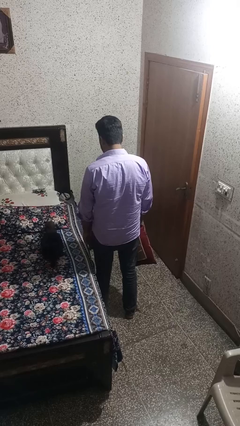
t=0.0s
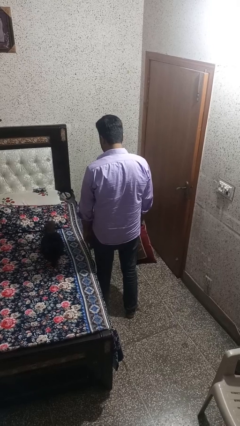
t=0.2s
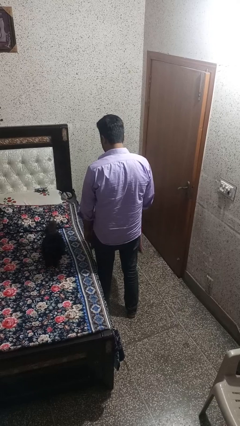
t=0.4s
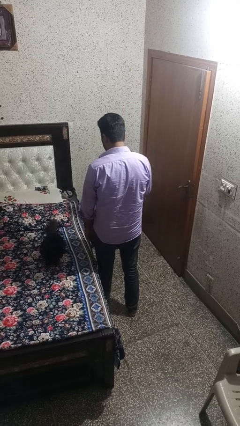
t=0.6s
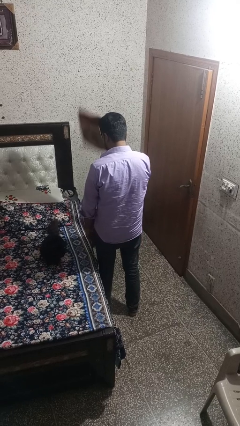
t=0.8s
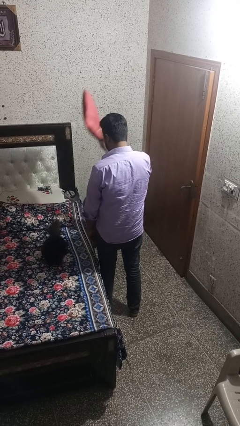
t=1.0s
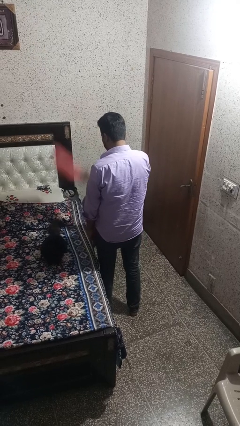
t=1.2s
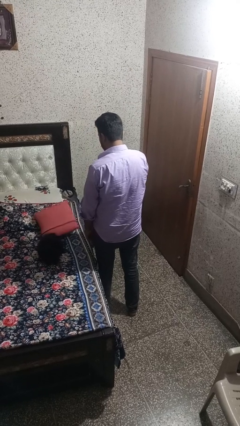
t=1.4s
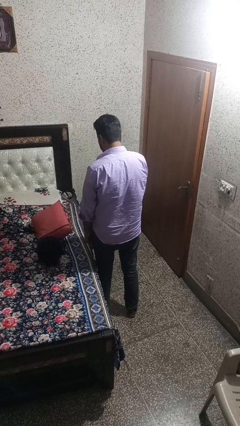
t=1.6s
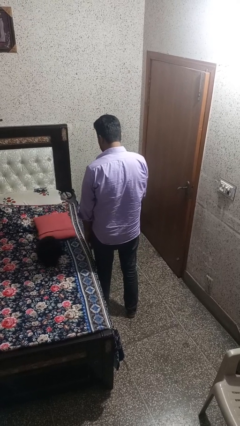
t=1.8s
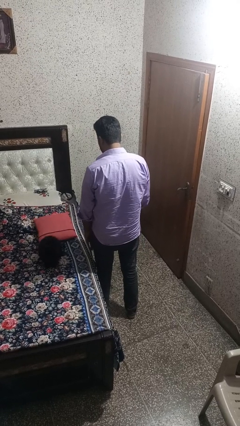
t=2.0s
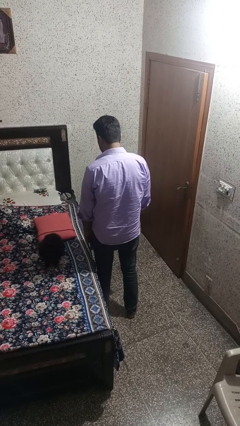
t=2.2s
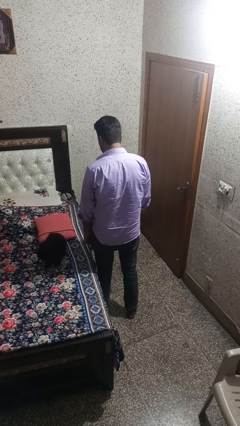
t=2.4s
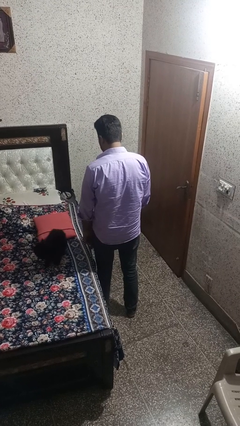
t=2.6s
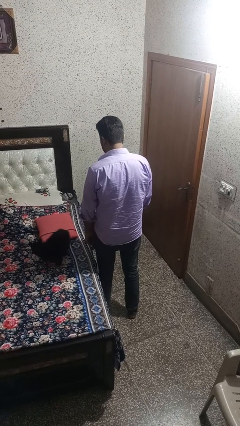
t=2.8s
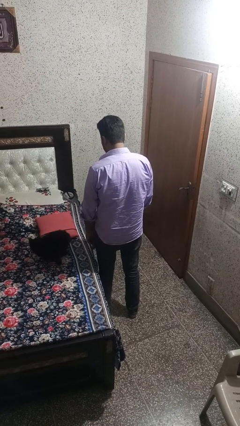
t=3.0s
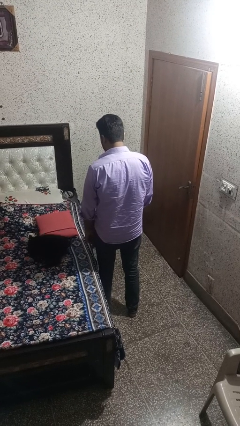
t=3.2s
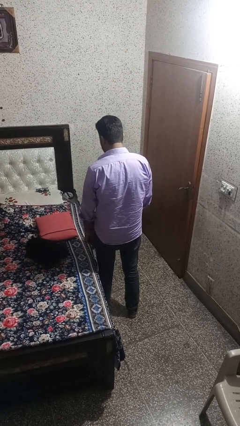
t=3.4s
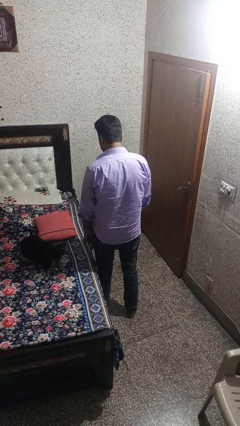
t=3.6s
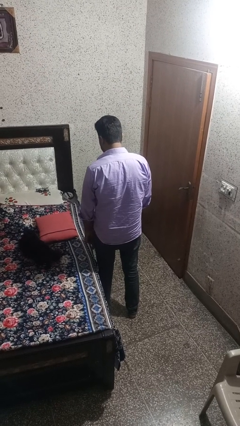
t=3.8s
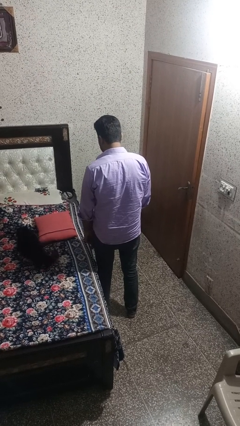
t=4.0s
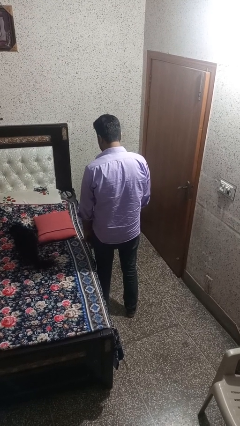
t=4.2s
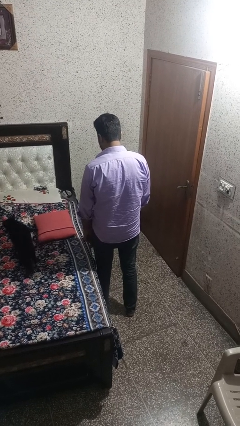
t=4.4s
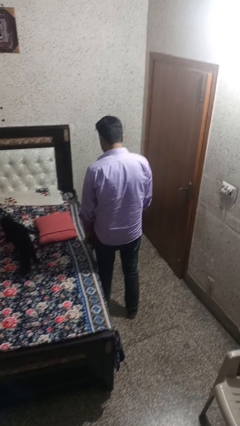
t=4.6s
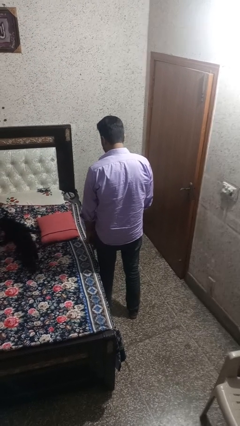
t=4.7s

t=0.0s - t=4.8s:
person throws object on bed

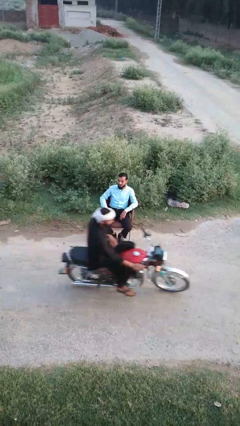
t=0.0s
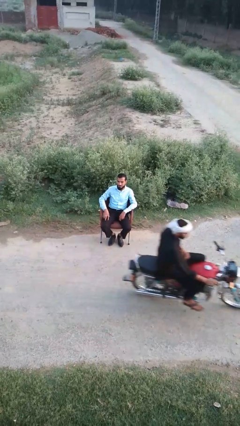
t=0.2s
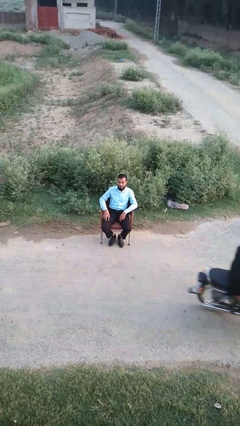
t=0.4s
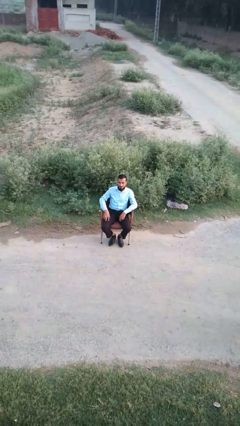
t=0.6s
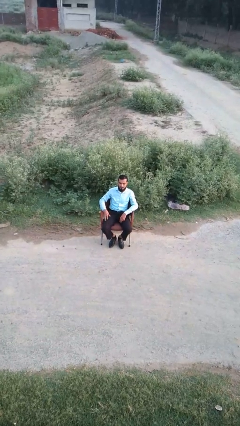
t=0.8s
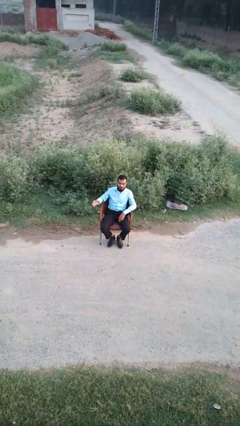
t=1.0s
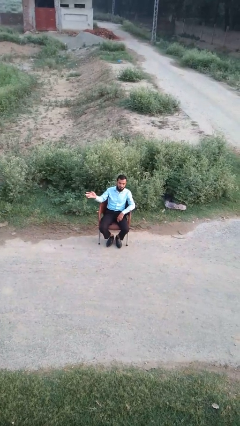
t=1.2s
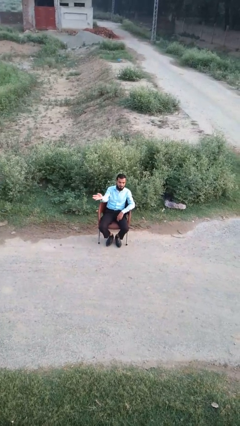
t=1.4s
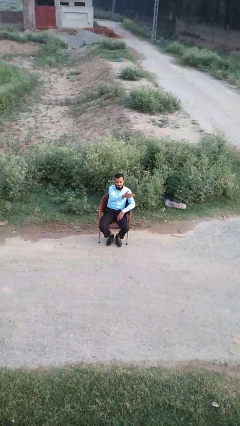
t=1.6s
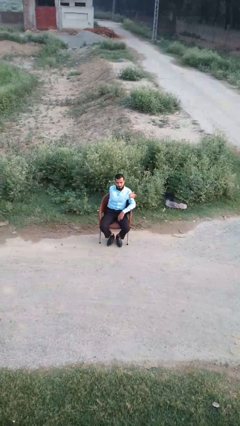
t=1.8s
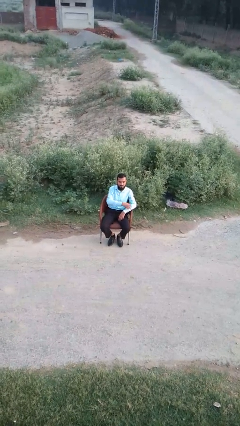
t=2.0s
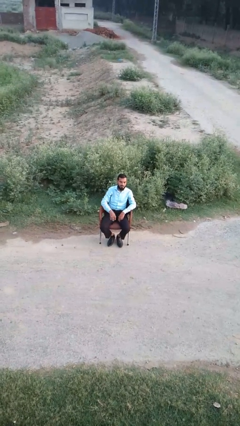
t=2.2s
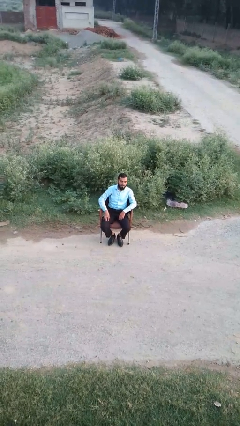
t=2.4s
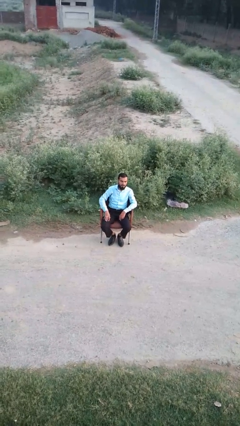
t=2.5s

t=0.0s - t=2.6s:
person gestures swipe left

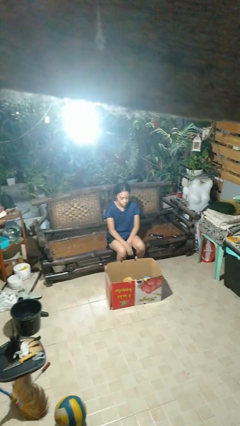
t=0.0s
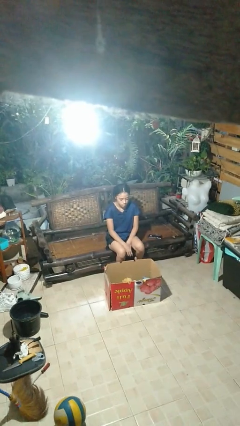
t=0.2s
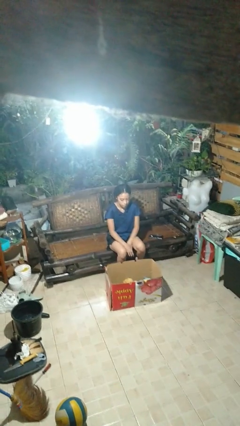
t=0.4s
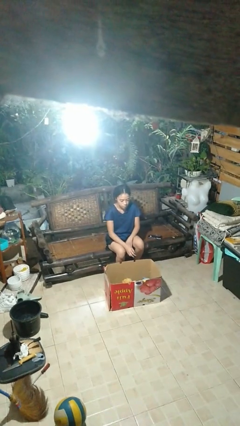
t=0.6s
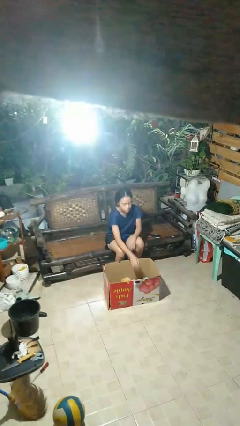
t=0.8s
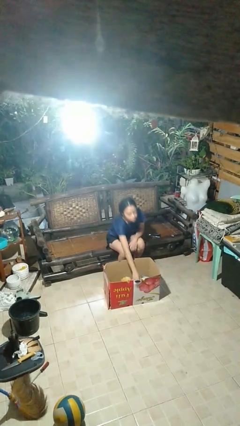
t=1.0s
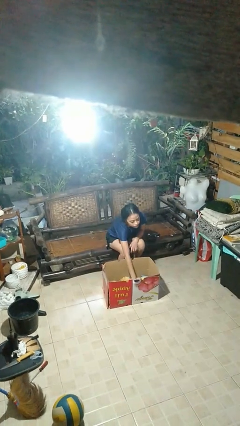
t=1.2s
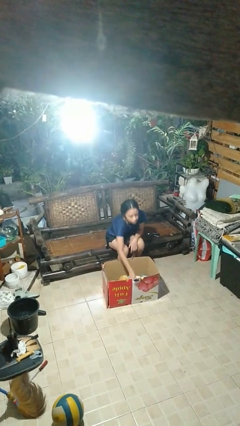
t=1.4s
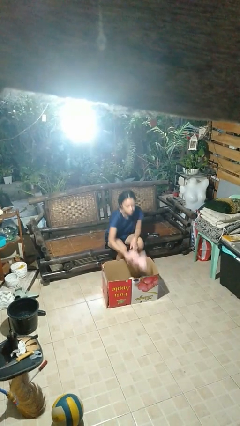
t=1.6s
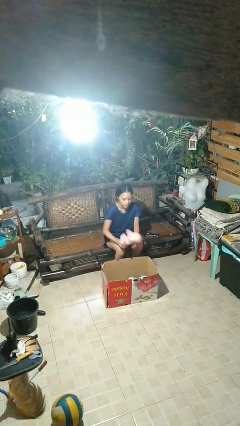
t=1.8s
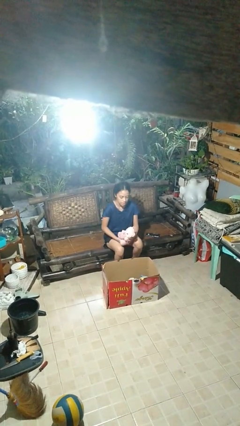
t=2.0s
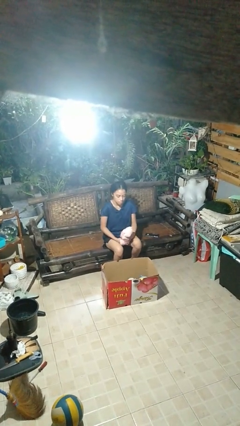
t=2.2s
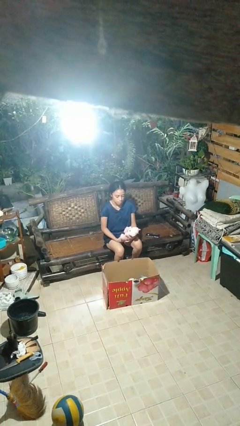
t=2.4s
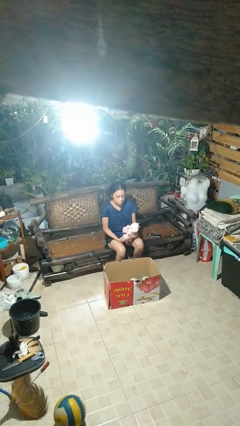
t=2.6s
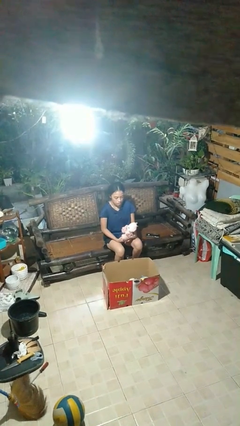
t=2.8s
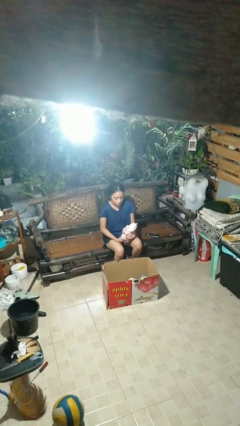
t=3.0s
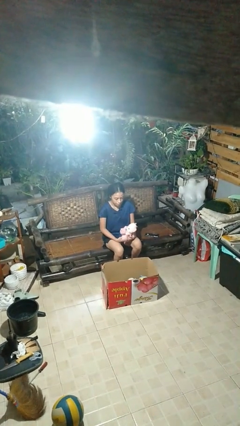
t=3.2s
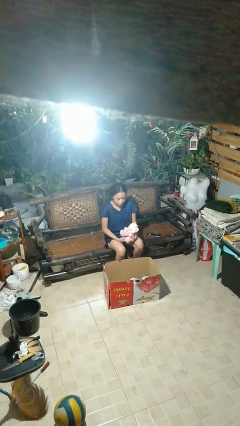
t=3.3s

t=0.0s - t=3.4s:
person takes object from box

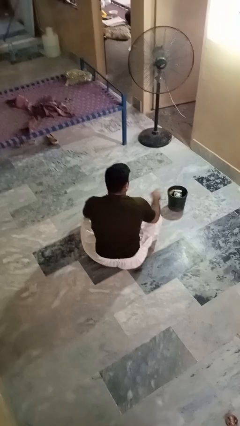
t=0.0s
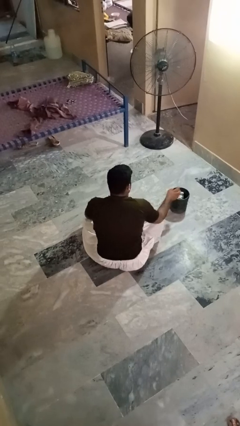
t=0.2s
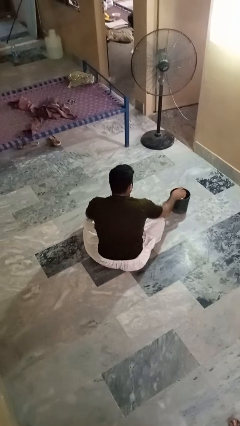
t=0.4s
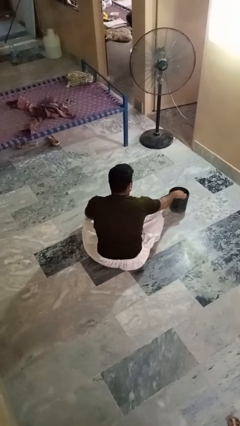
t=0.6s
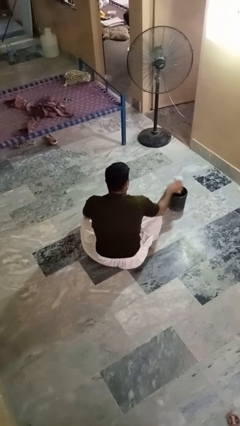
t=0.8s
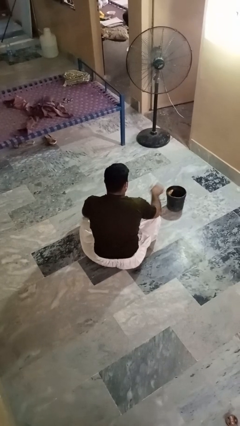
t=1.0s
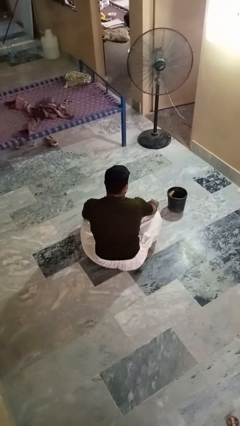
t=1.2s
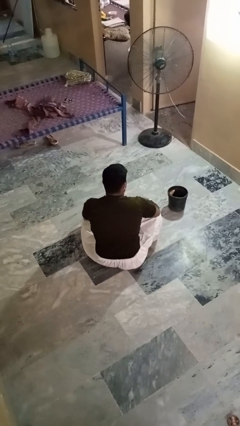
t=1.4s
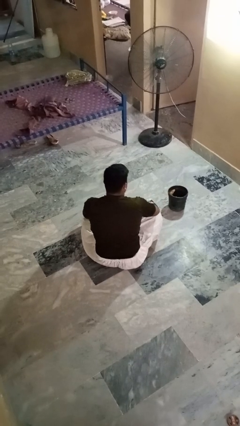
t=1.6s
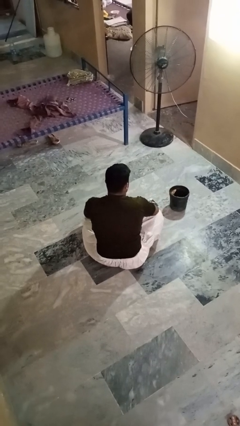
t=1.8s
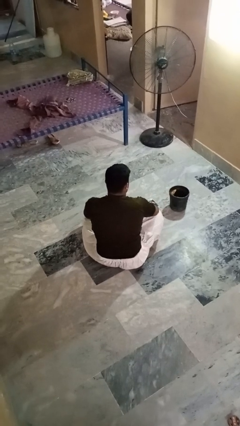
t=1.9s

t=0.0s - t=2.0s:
person takes object from basket

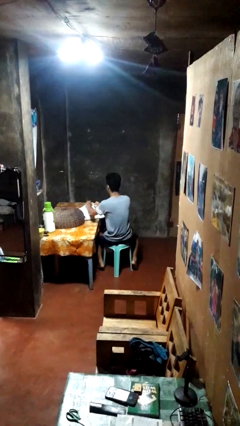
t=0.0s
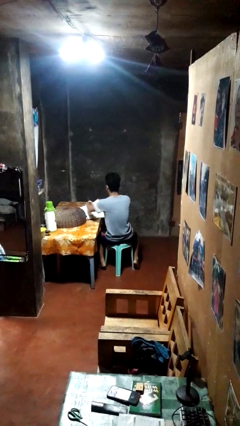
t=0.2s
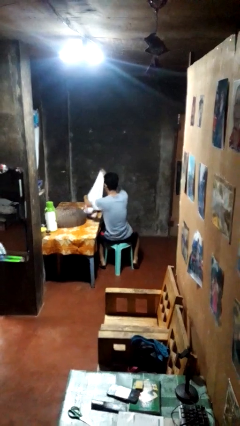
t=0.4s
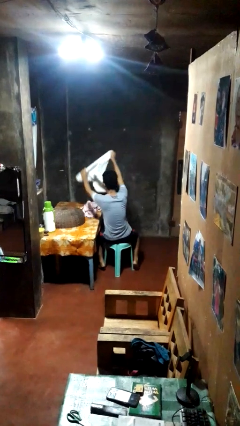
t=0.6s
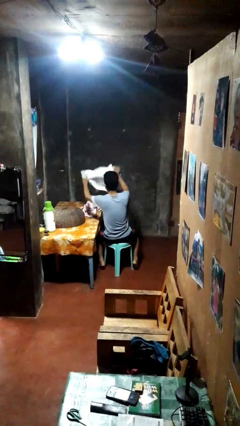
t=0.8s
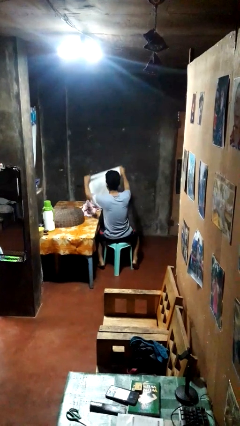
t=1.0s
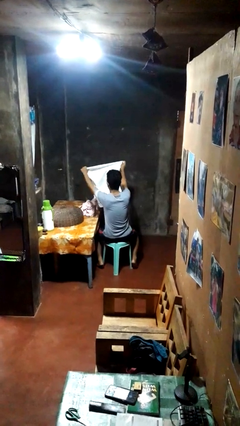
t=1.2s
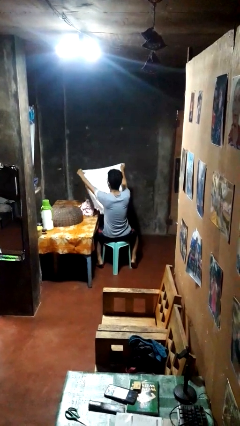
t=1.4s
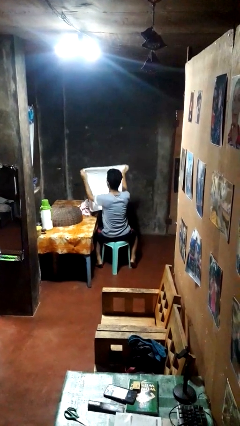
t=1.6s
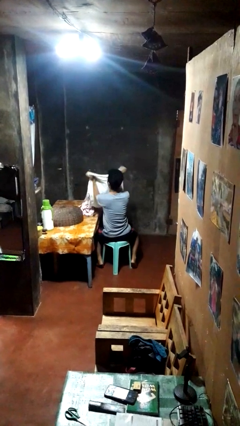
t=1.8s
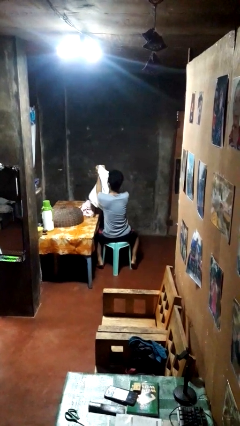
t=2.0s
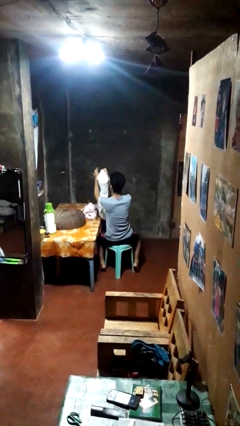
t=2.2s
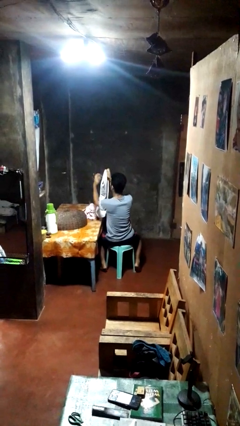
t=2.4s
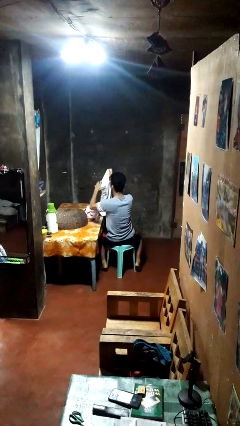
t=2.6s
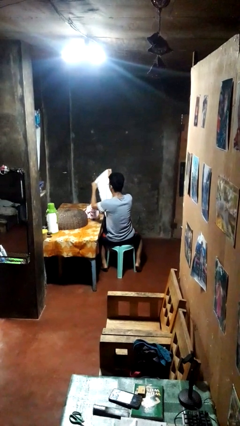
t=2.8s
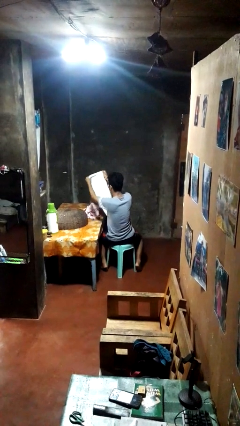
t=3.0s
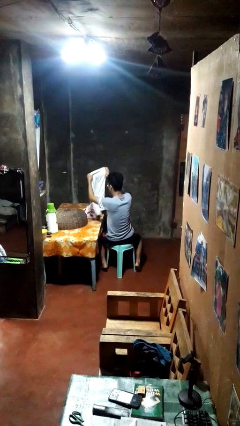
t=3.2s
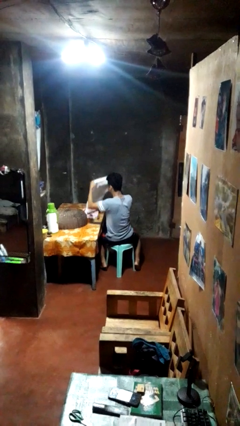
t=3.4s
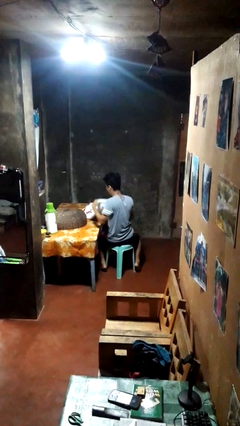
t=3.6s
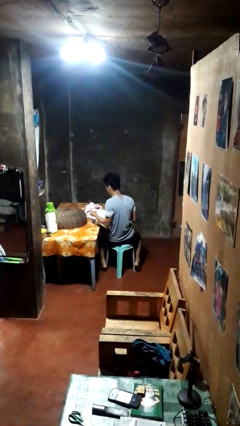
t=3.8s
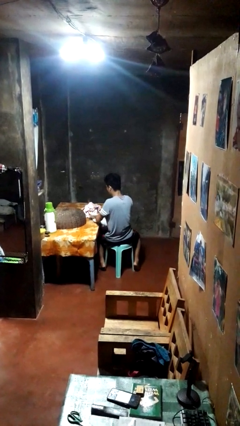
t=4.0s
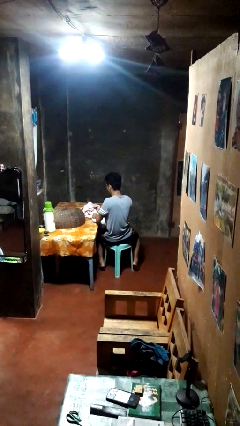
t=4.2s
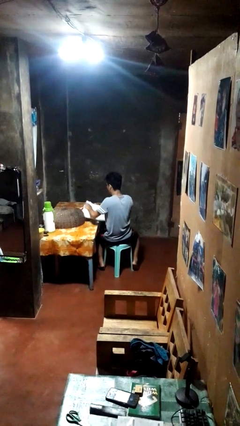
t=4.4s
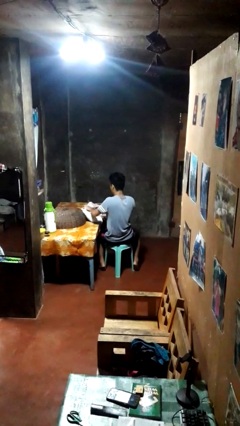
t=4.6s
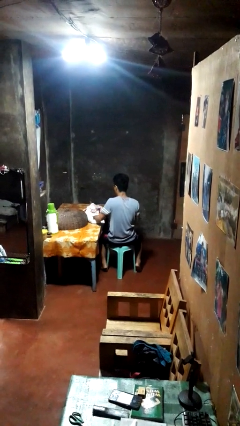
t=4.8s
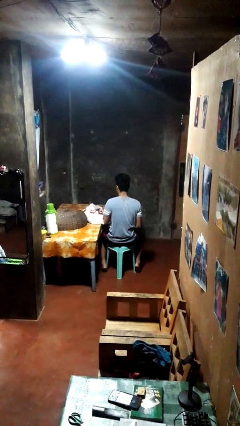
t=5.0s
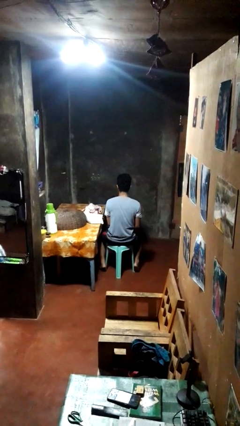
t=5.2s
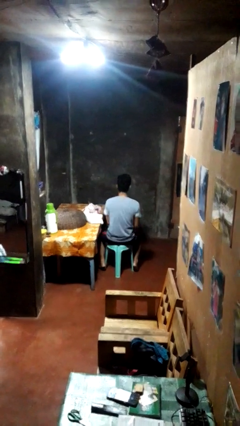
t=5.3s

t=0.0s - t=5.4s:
person folds towel
